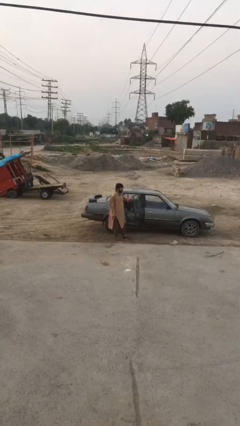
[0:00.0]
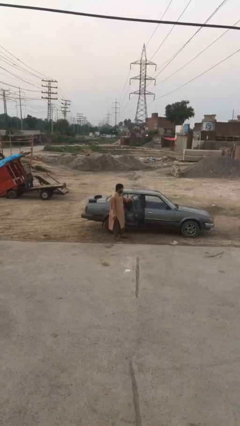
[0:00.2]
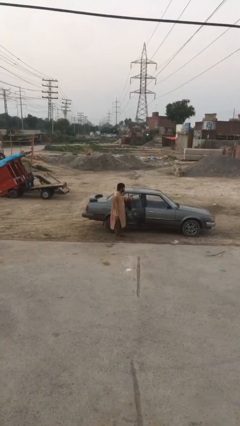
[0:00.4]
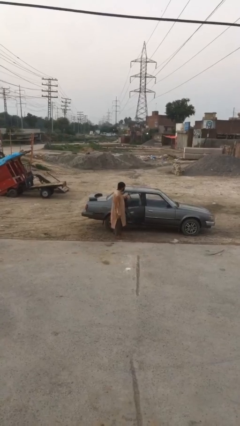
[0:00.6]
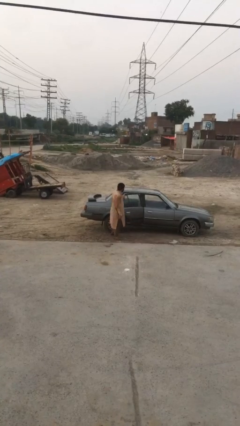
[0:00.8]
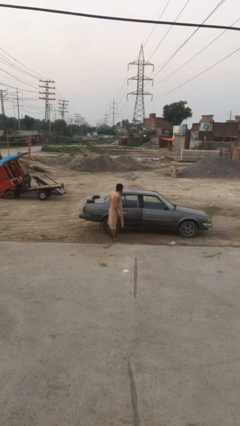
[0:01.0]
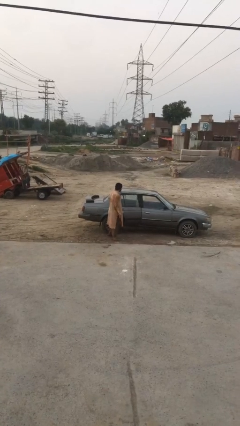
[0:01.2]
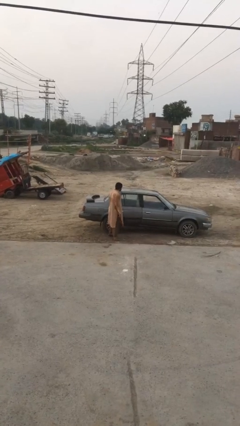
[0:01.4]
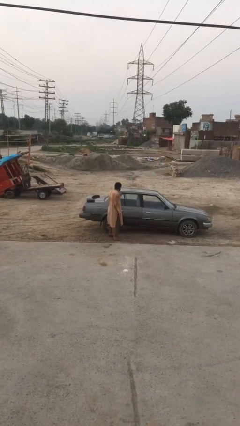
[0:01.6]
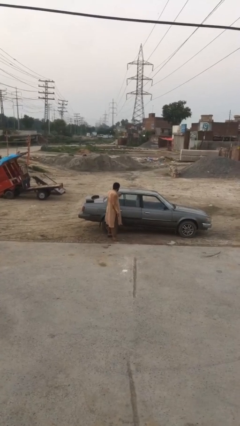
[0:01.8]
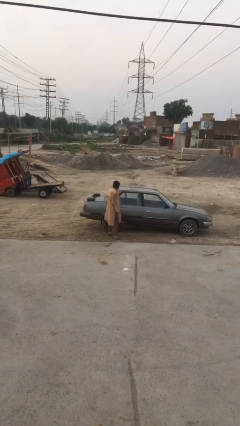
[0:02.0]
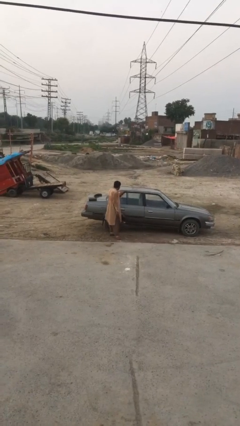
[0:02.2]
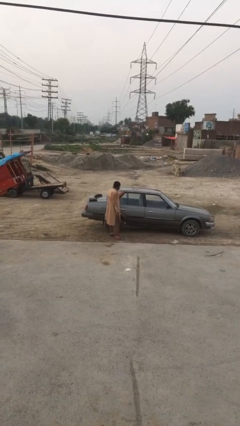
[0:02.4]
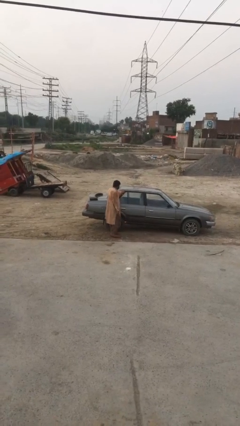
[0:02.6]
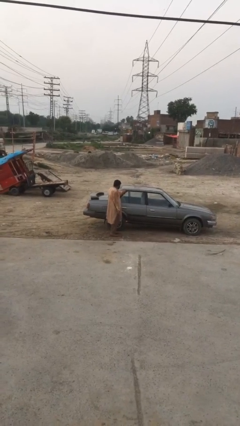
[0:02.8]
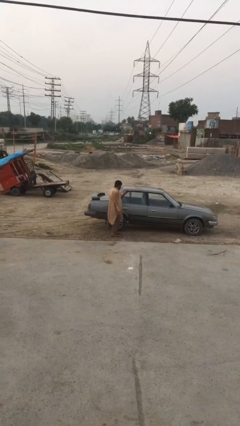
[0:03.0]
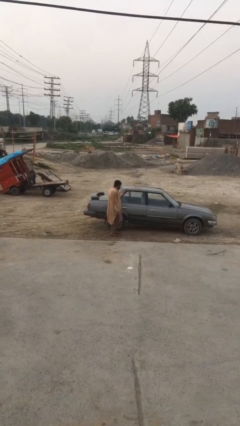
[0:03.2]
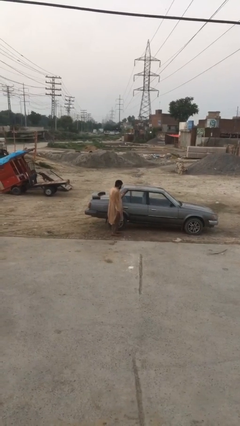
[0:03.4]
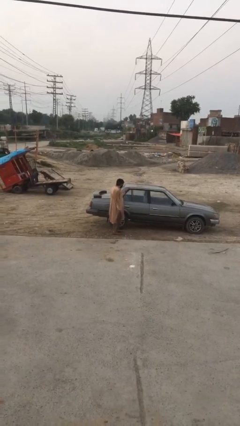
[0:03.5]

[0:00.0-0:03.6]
person closes car door

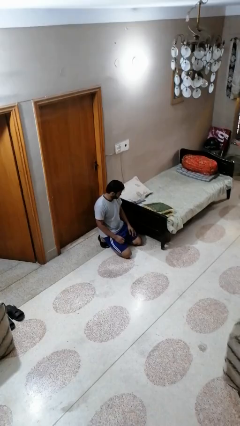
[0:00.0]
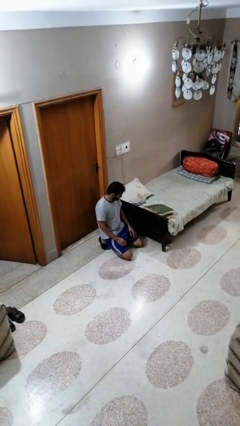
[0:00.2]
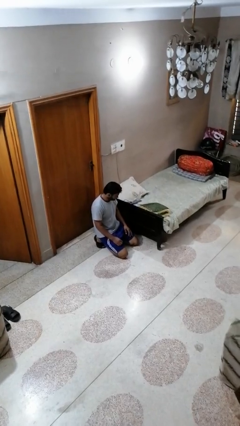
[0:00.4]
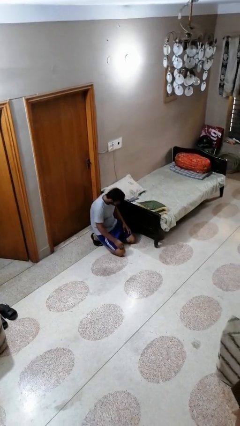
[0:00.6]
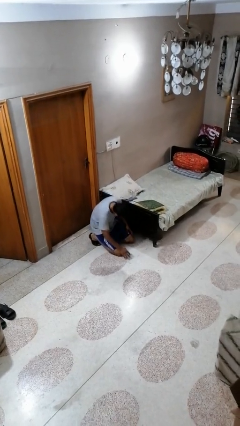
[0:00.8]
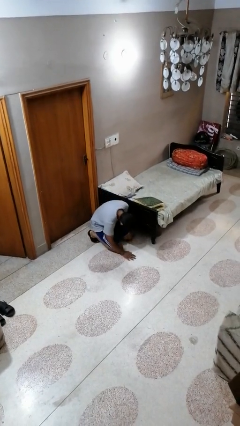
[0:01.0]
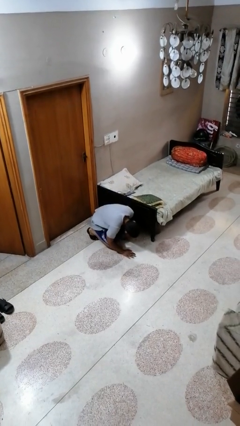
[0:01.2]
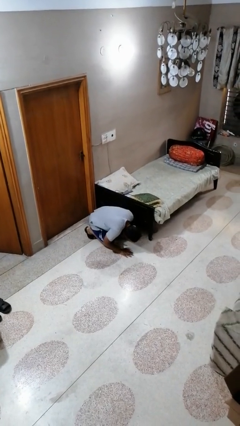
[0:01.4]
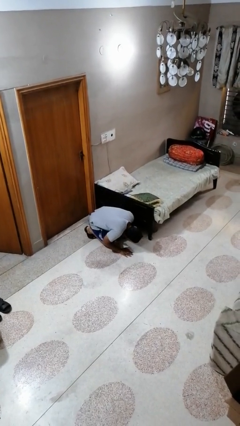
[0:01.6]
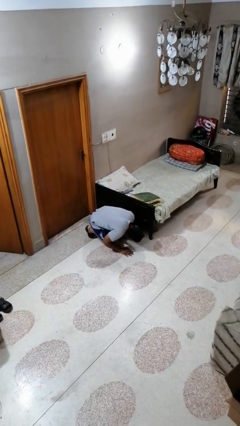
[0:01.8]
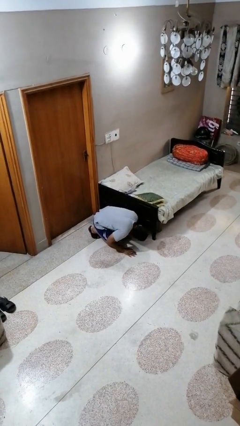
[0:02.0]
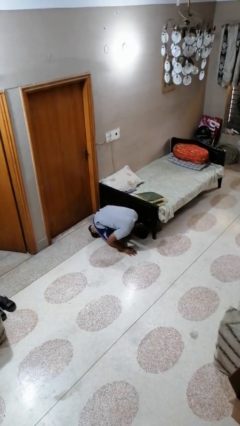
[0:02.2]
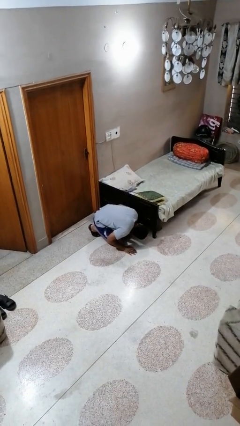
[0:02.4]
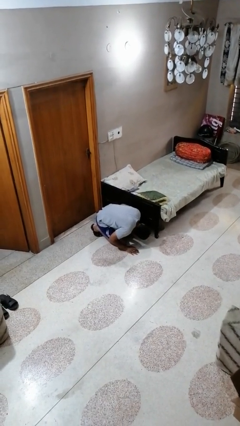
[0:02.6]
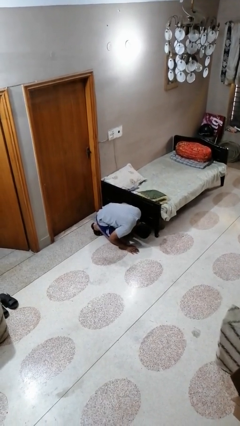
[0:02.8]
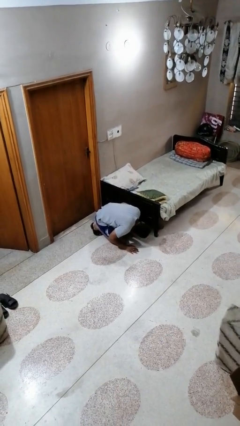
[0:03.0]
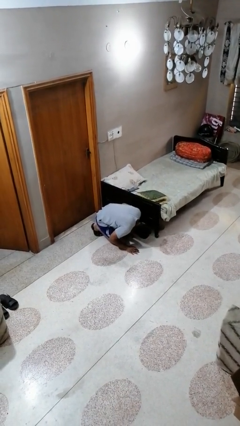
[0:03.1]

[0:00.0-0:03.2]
person searches under bed

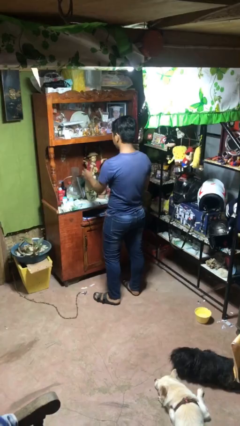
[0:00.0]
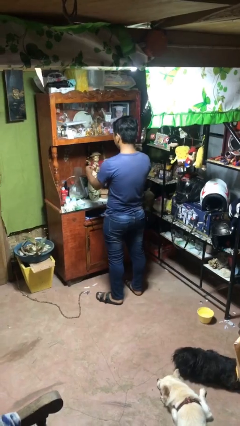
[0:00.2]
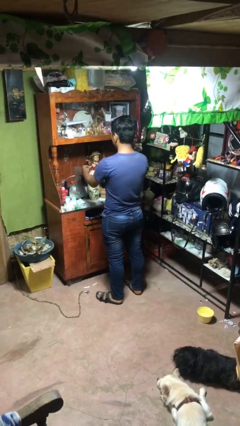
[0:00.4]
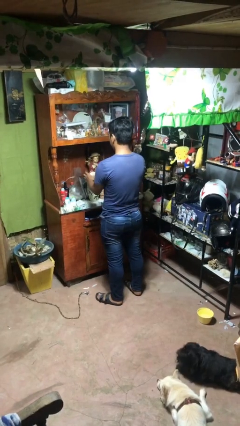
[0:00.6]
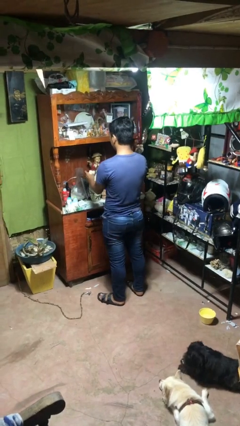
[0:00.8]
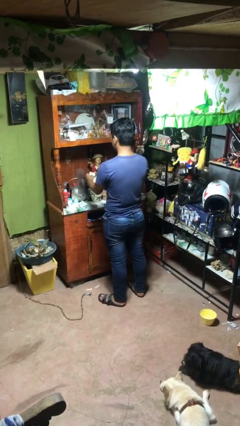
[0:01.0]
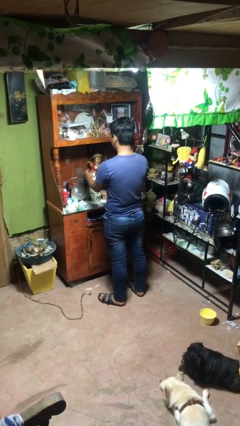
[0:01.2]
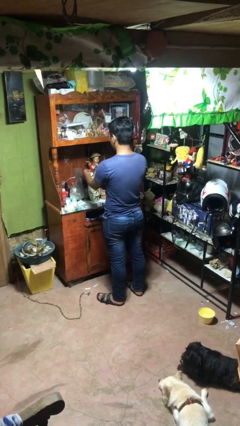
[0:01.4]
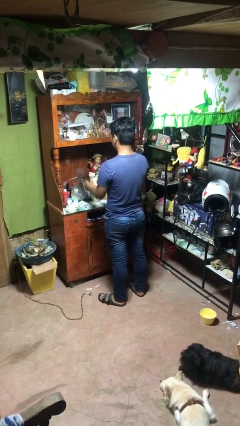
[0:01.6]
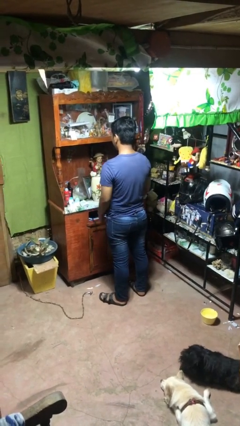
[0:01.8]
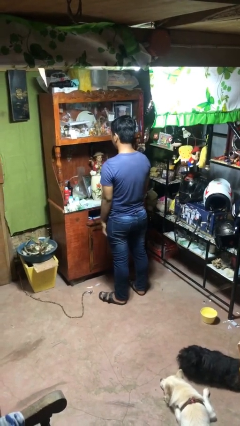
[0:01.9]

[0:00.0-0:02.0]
person arranges flowers in vase

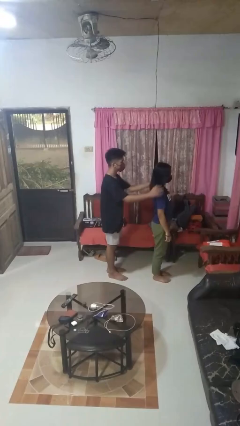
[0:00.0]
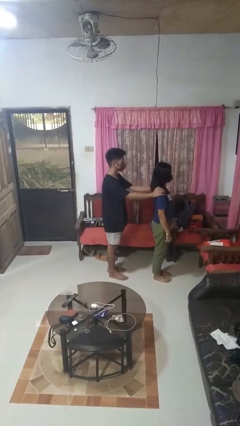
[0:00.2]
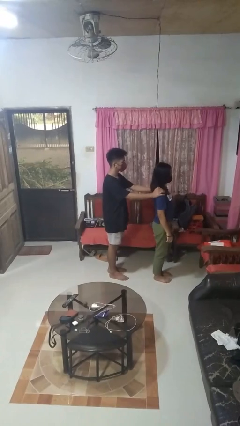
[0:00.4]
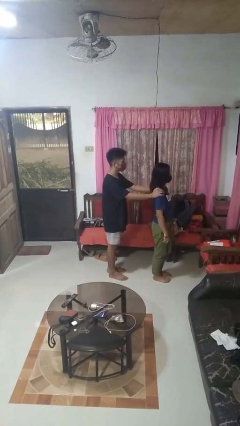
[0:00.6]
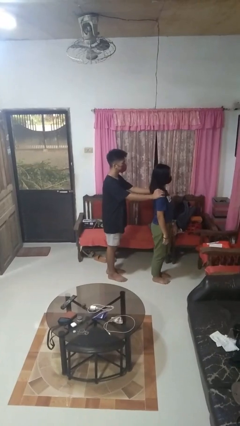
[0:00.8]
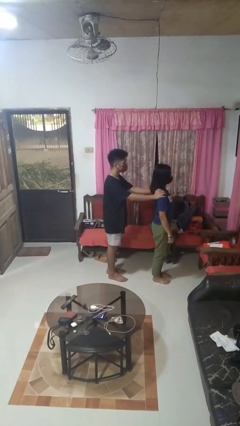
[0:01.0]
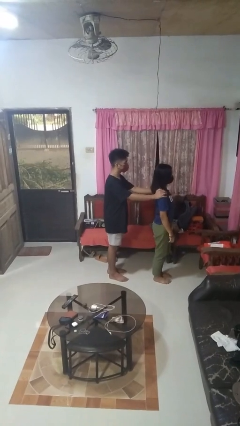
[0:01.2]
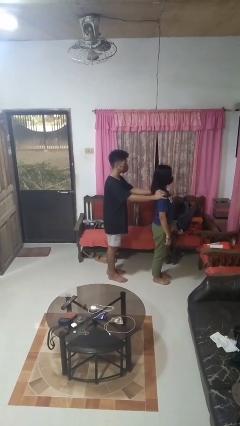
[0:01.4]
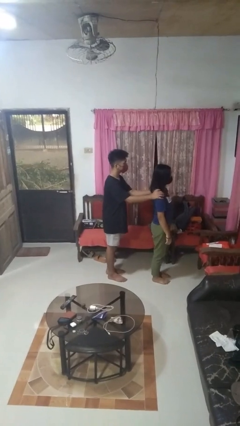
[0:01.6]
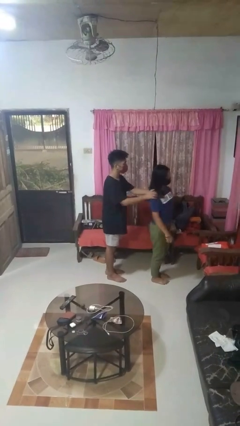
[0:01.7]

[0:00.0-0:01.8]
person grabs person by shoulder

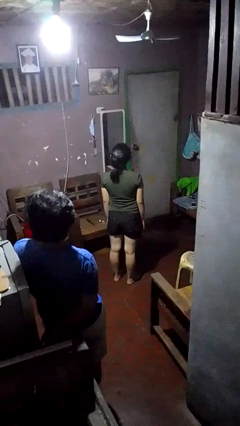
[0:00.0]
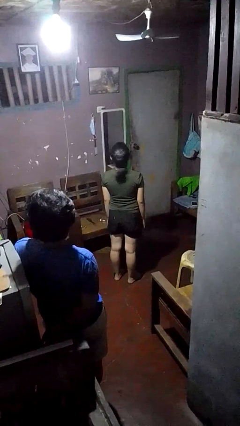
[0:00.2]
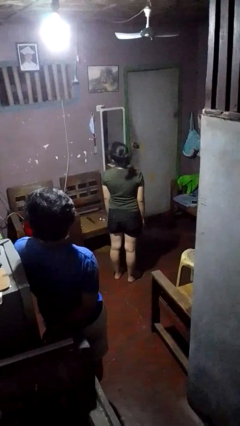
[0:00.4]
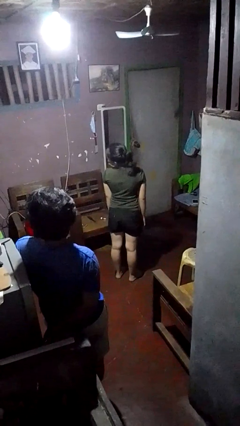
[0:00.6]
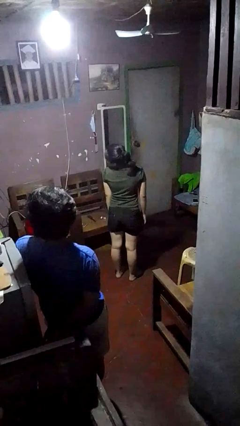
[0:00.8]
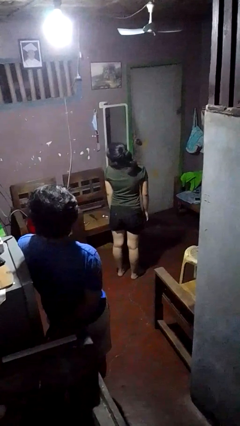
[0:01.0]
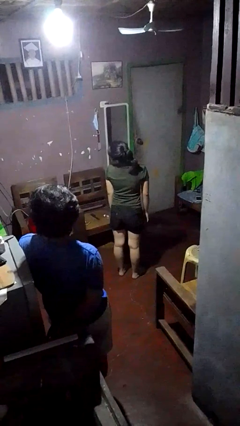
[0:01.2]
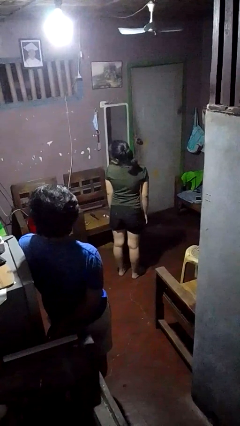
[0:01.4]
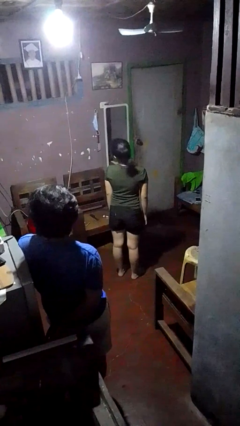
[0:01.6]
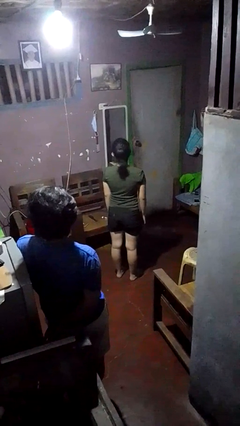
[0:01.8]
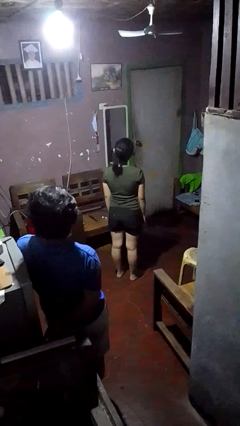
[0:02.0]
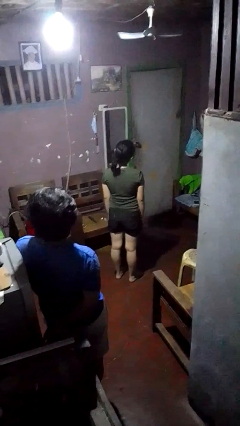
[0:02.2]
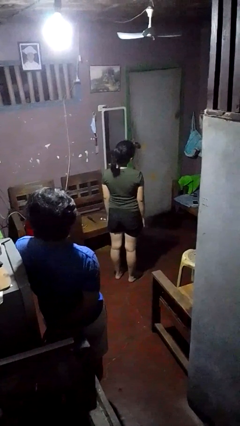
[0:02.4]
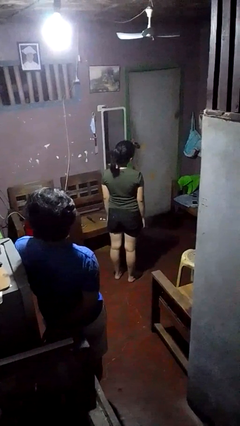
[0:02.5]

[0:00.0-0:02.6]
person looks over shoulder

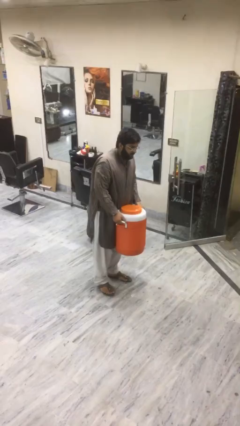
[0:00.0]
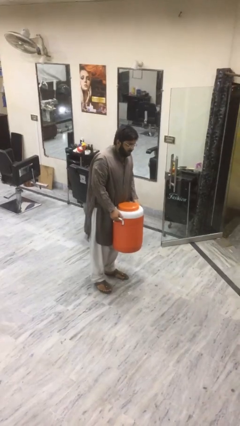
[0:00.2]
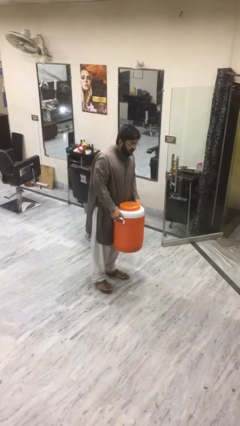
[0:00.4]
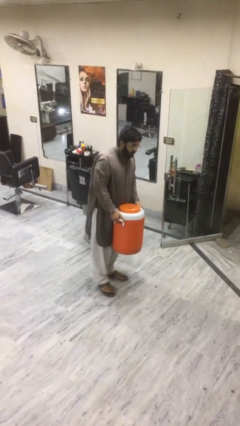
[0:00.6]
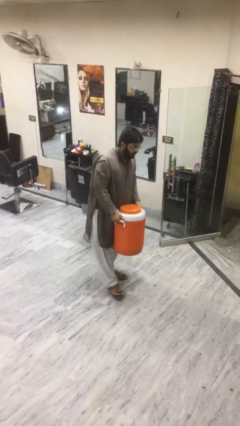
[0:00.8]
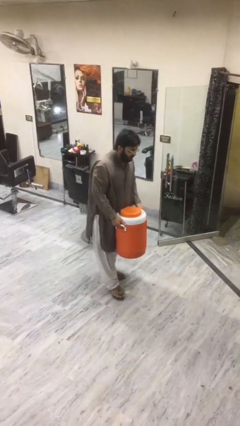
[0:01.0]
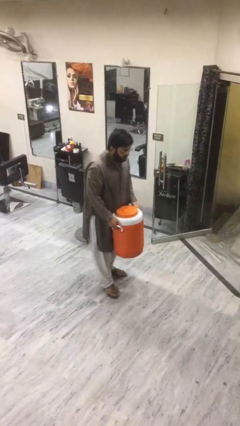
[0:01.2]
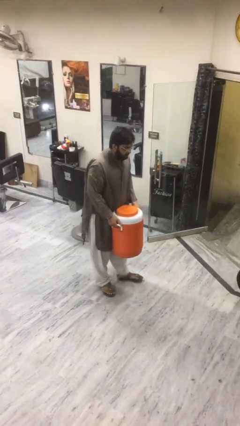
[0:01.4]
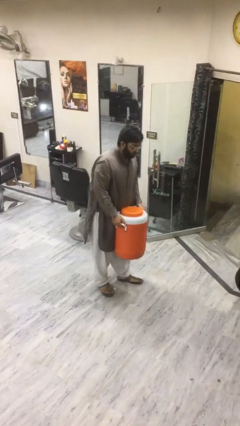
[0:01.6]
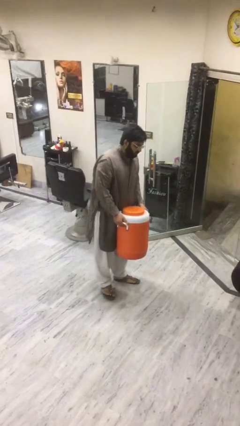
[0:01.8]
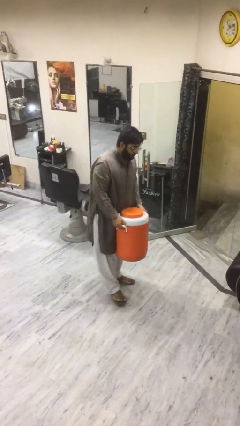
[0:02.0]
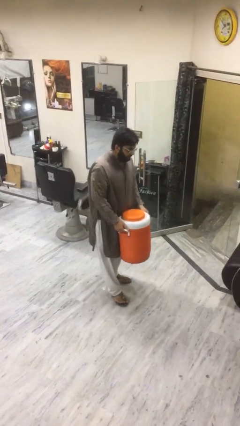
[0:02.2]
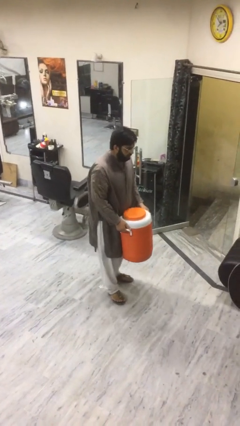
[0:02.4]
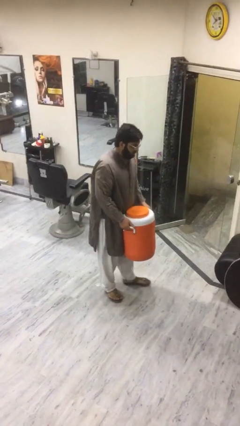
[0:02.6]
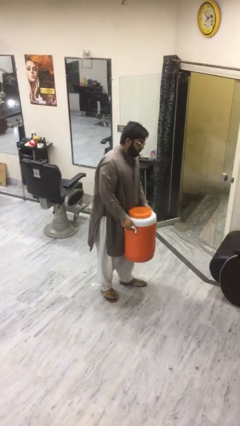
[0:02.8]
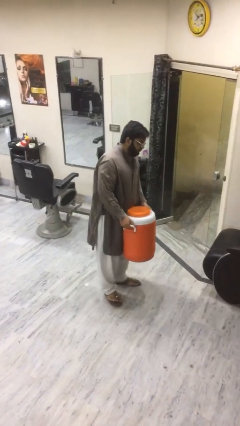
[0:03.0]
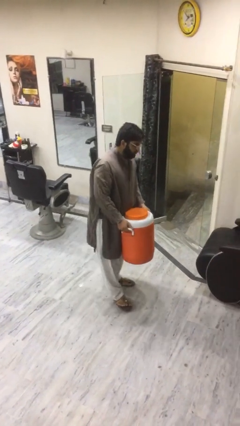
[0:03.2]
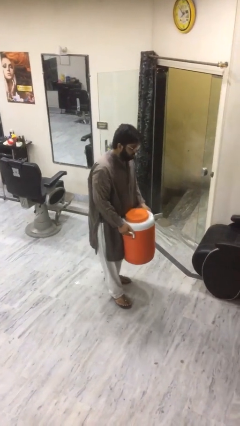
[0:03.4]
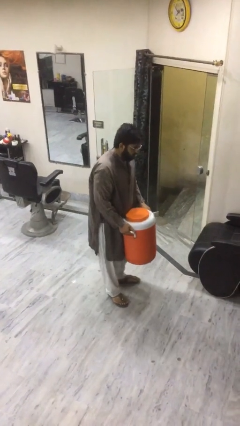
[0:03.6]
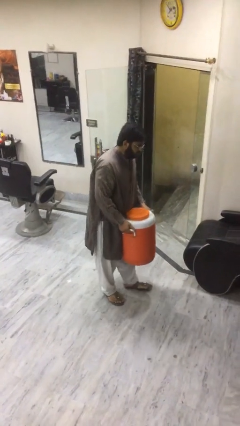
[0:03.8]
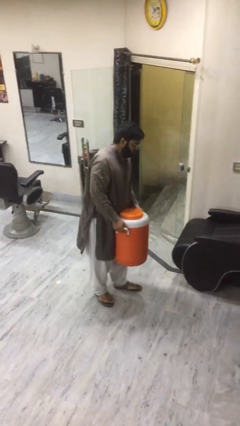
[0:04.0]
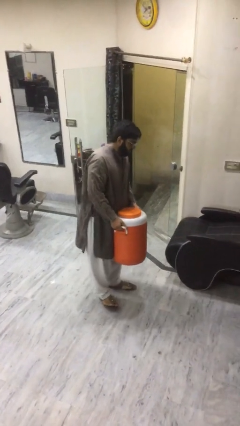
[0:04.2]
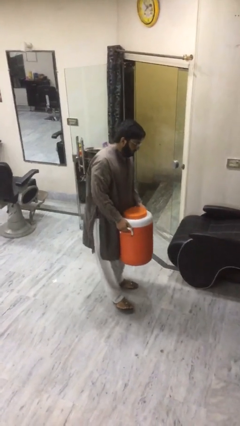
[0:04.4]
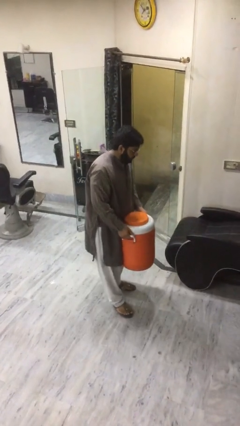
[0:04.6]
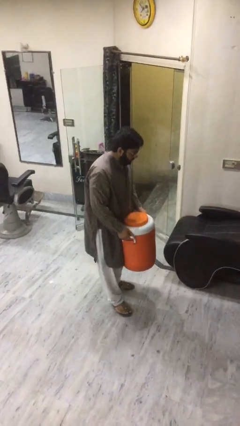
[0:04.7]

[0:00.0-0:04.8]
person carries heavy object
